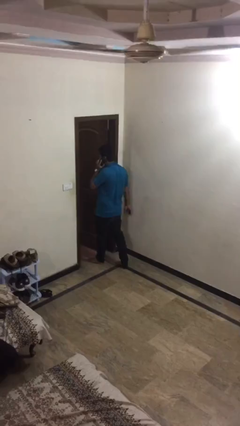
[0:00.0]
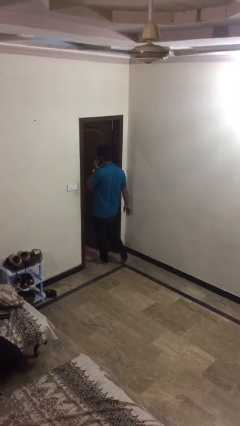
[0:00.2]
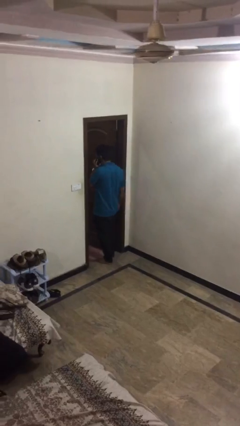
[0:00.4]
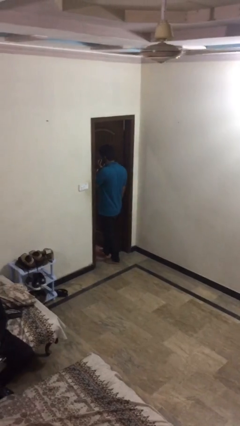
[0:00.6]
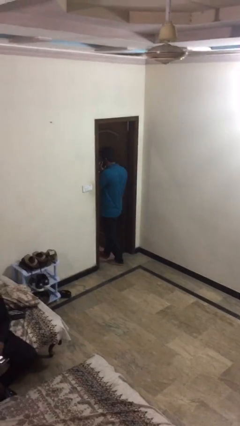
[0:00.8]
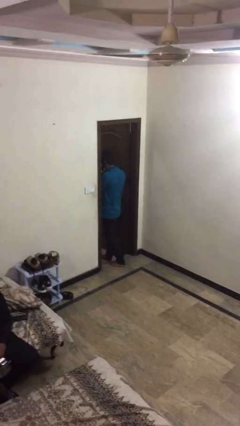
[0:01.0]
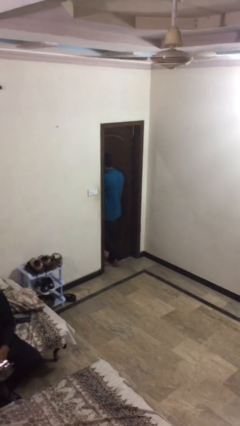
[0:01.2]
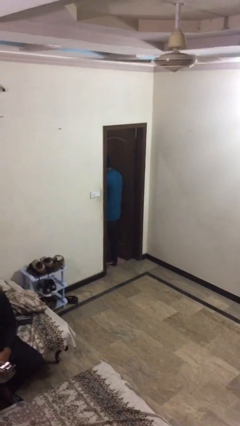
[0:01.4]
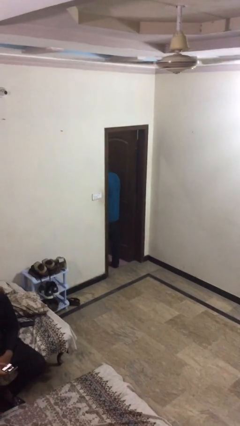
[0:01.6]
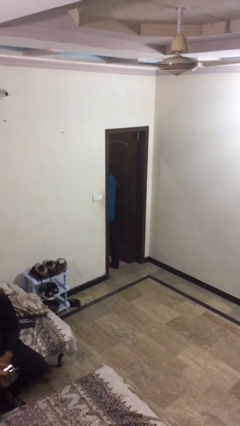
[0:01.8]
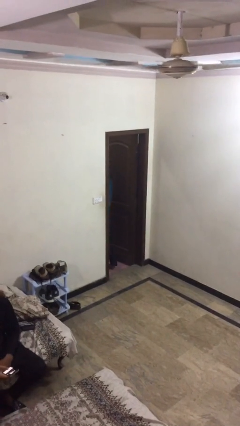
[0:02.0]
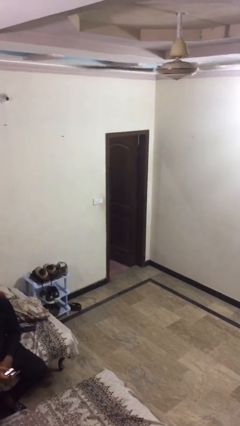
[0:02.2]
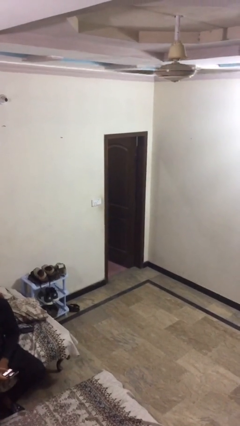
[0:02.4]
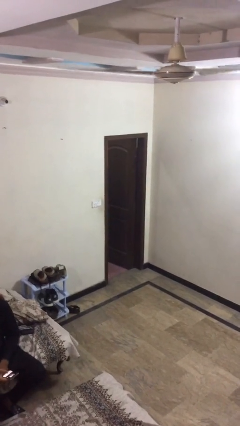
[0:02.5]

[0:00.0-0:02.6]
person exits scene through structure

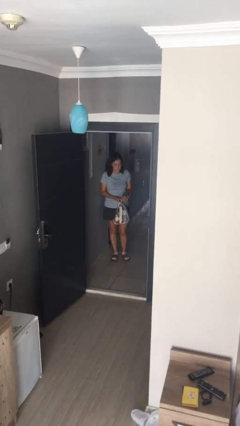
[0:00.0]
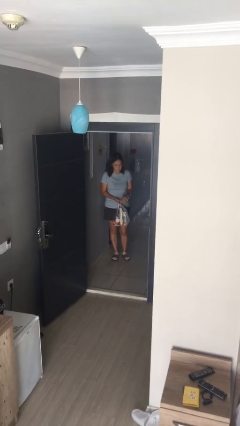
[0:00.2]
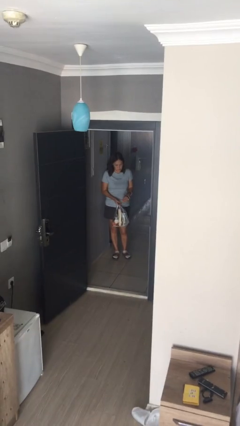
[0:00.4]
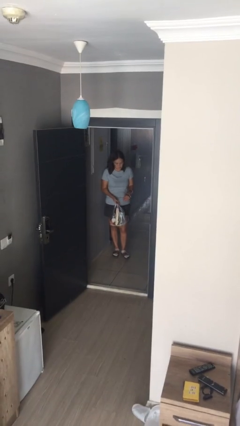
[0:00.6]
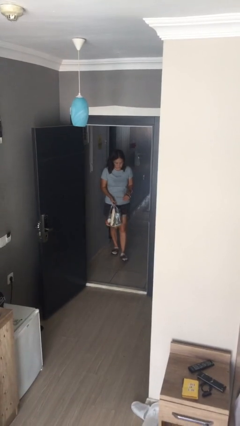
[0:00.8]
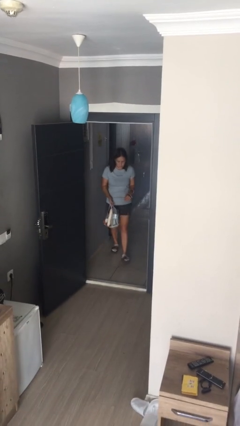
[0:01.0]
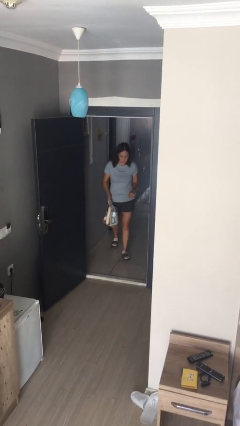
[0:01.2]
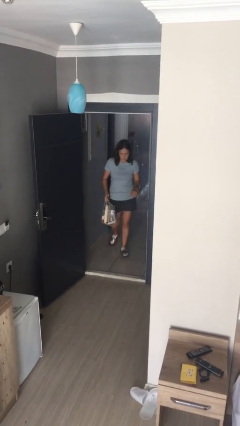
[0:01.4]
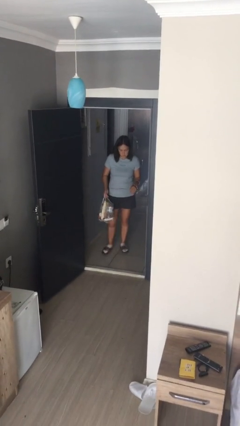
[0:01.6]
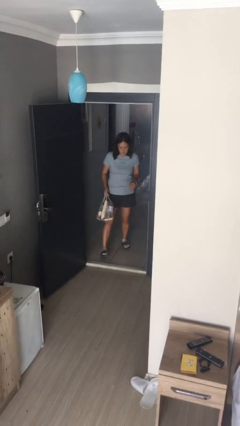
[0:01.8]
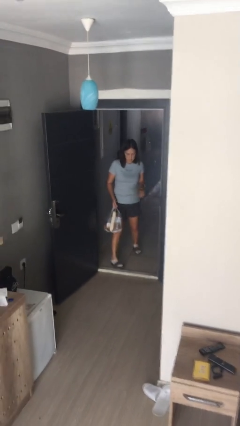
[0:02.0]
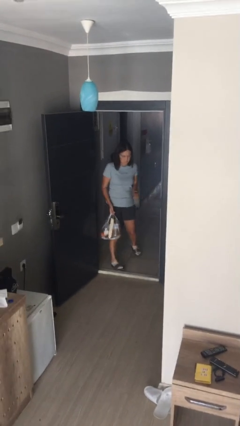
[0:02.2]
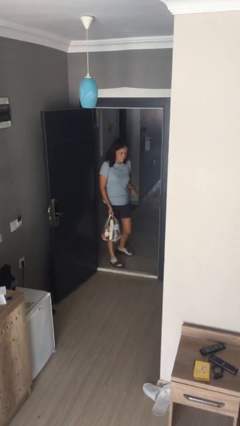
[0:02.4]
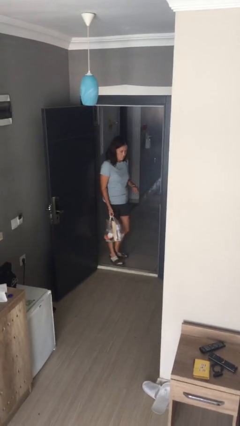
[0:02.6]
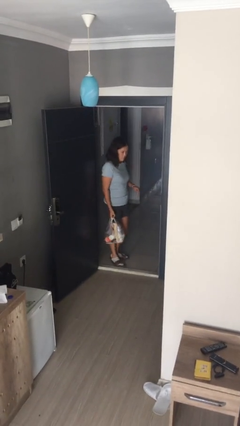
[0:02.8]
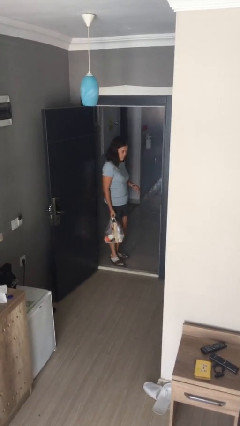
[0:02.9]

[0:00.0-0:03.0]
person carries groceries

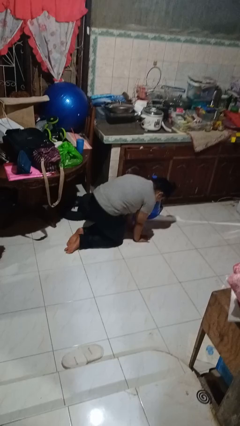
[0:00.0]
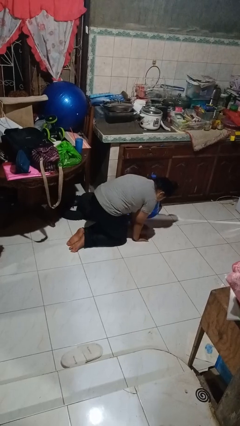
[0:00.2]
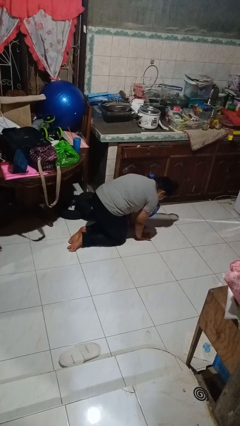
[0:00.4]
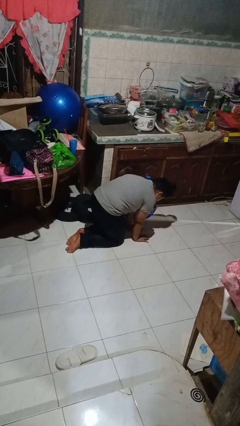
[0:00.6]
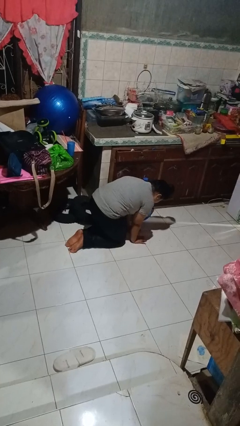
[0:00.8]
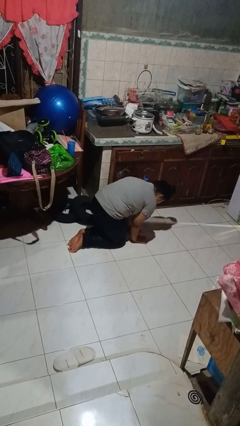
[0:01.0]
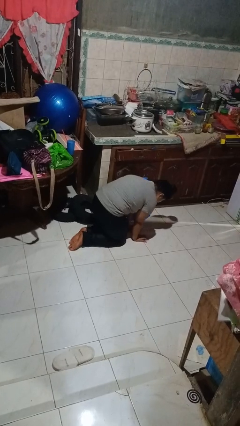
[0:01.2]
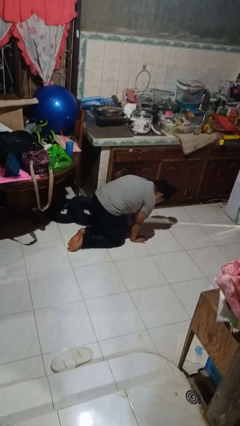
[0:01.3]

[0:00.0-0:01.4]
person crawls

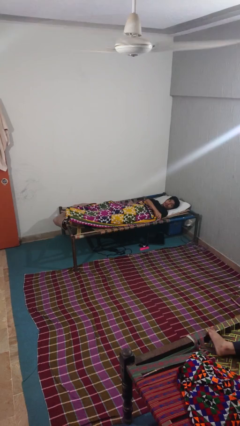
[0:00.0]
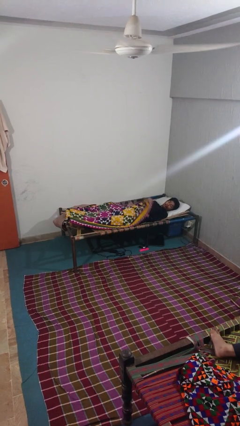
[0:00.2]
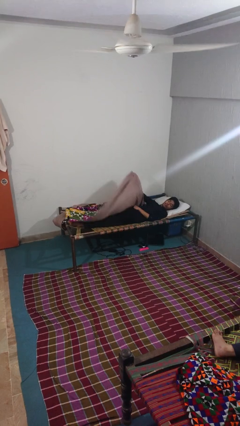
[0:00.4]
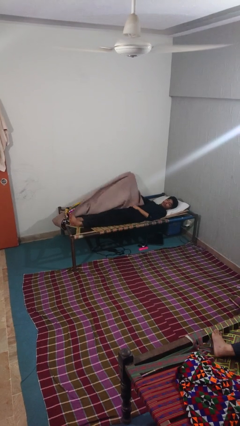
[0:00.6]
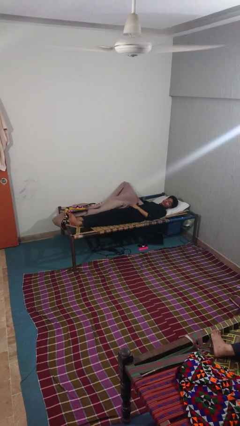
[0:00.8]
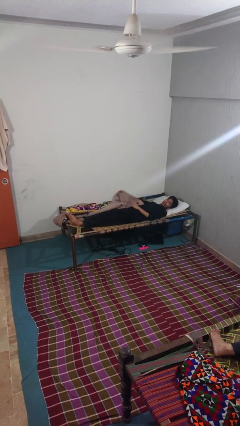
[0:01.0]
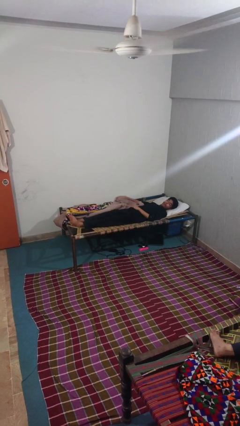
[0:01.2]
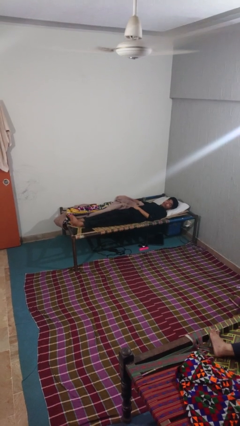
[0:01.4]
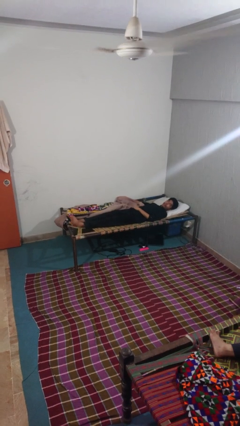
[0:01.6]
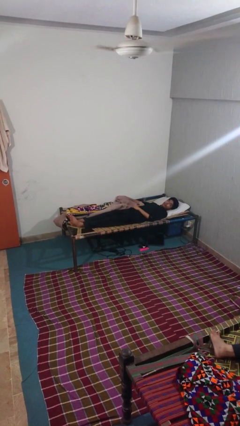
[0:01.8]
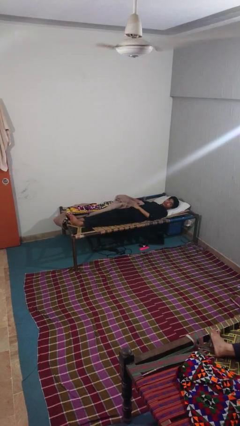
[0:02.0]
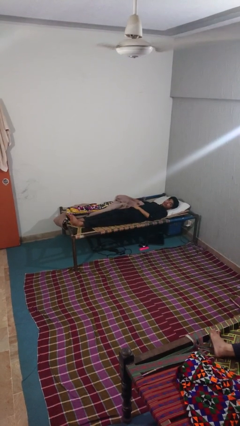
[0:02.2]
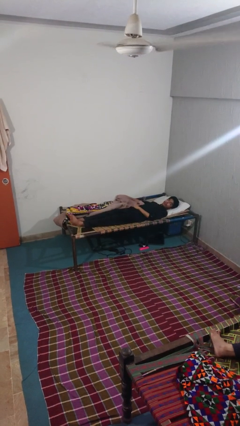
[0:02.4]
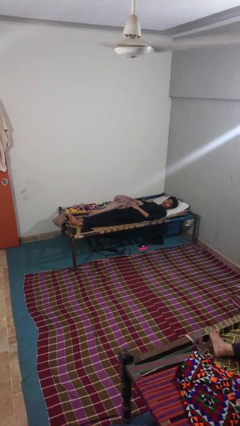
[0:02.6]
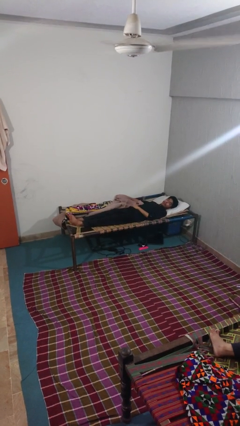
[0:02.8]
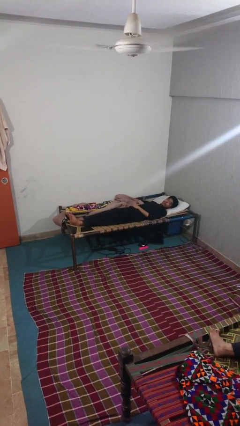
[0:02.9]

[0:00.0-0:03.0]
person uncovers with bedsheets

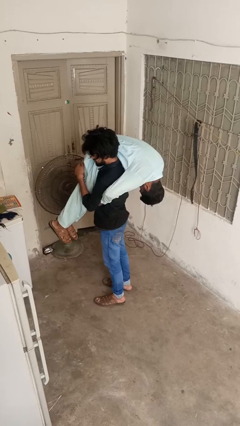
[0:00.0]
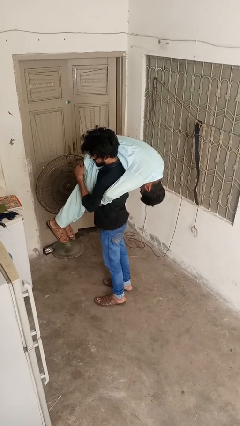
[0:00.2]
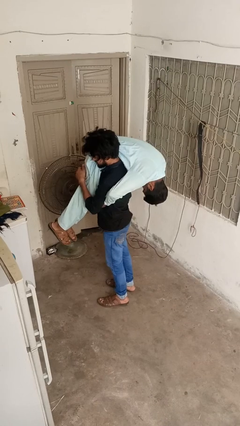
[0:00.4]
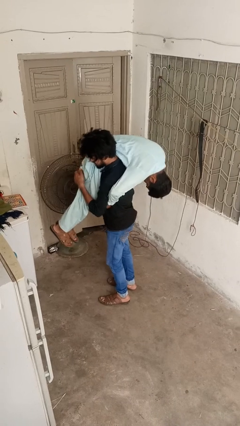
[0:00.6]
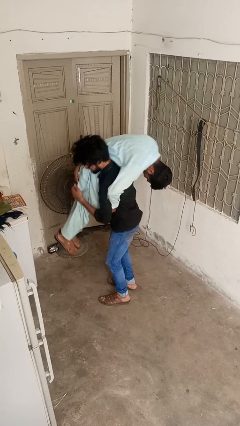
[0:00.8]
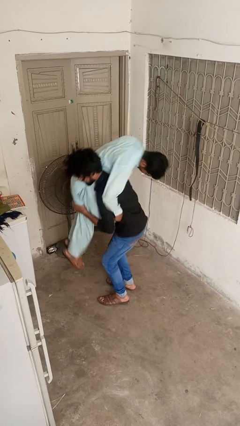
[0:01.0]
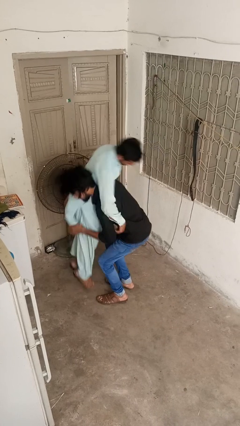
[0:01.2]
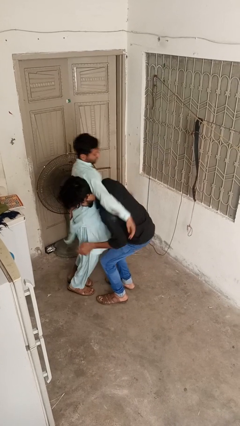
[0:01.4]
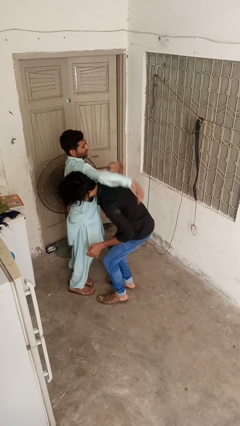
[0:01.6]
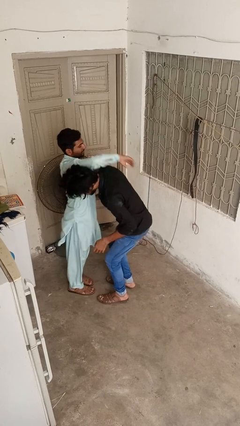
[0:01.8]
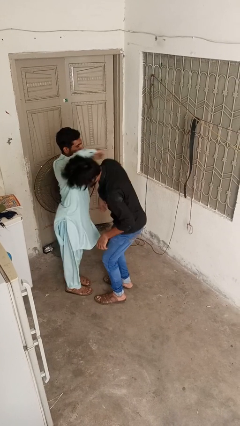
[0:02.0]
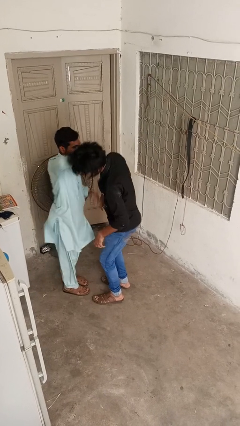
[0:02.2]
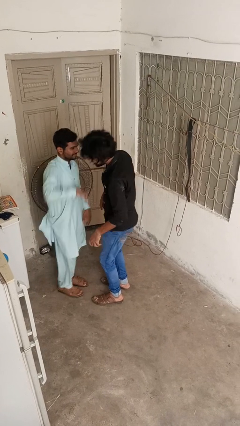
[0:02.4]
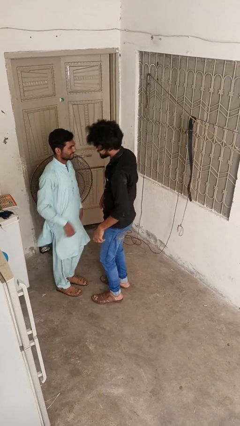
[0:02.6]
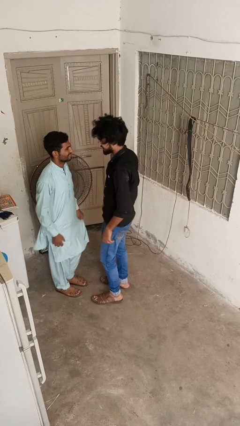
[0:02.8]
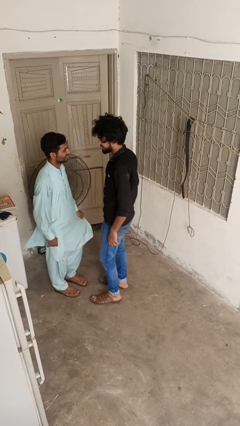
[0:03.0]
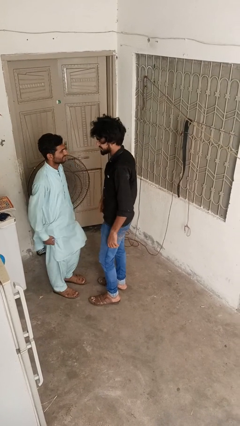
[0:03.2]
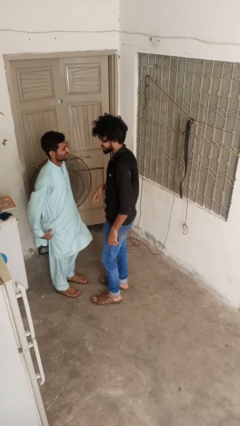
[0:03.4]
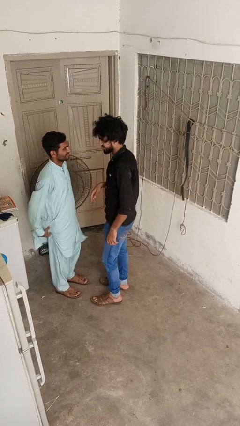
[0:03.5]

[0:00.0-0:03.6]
person puts down person

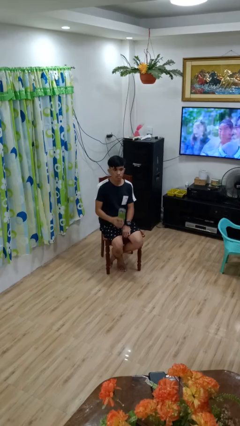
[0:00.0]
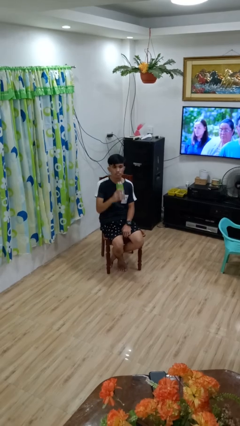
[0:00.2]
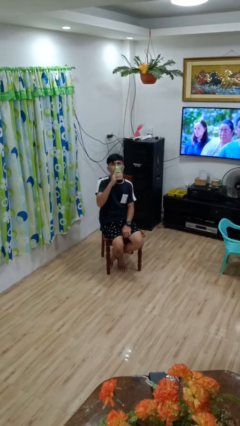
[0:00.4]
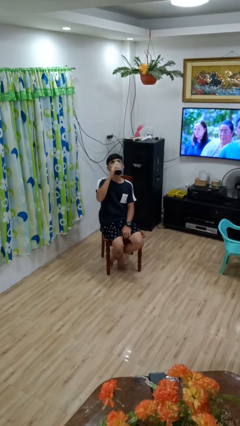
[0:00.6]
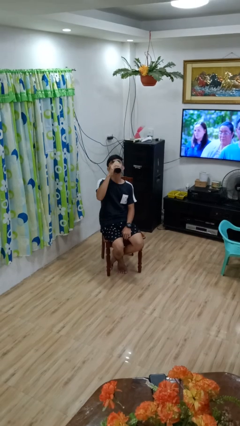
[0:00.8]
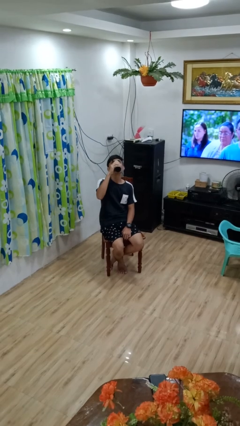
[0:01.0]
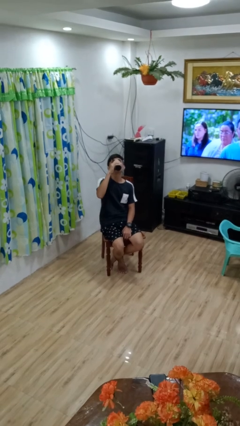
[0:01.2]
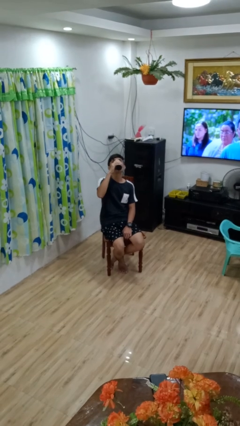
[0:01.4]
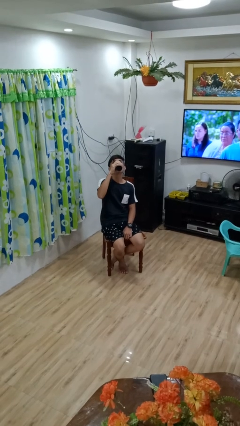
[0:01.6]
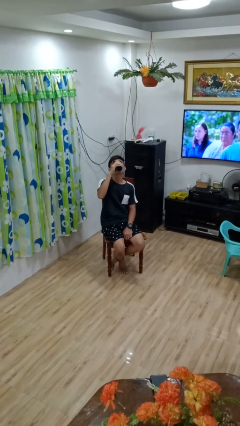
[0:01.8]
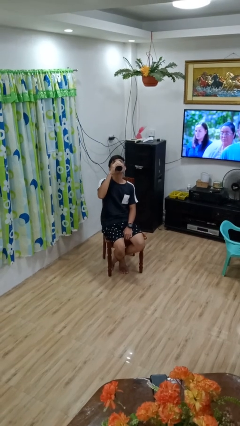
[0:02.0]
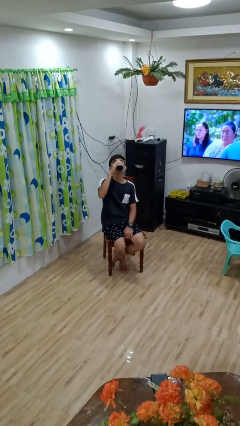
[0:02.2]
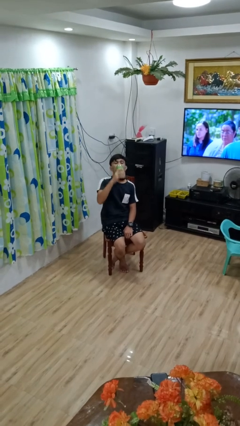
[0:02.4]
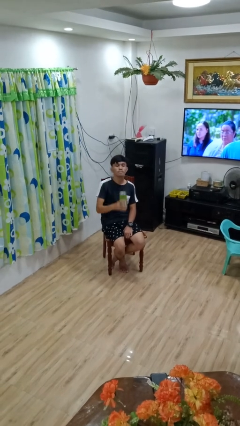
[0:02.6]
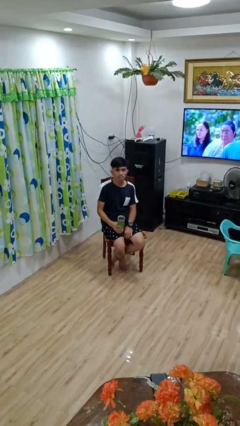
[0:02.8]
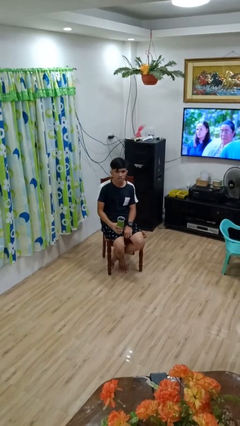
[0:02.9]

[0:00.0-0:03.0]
person drinks from bottle

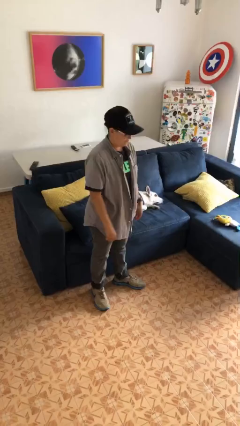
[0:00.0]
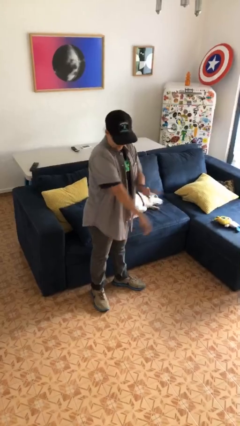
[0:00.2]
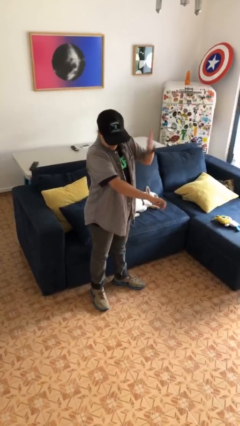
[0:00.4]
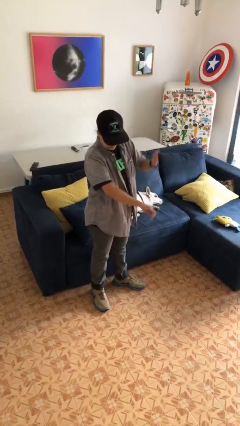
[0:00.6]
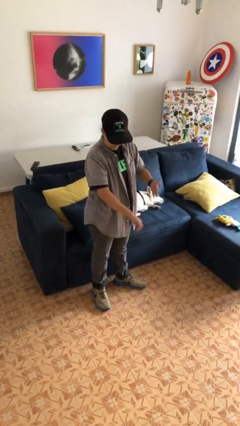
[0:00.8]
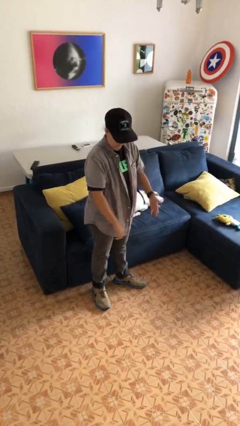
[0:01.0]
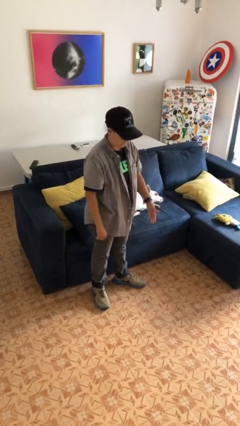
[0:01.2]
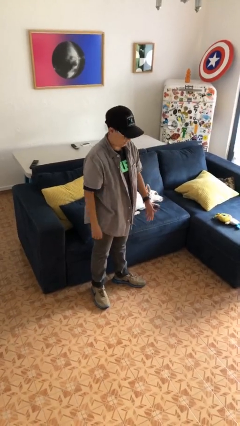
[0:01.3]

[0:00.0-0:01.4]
person swats bug
